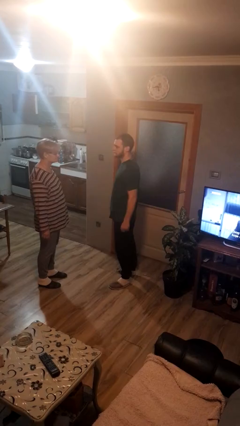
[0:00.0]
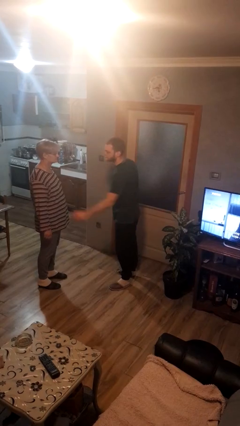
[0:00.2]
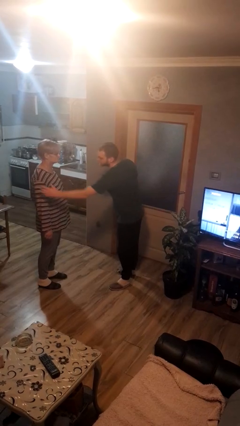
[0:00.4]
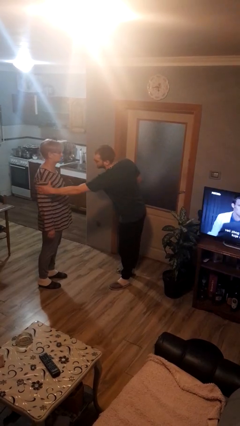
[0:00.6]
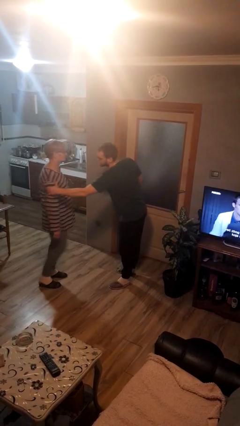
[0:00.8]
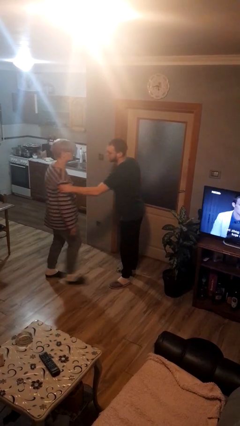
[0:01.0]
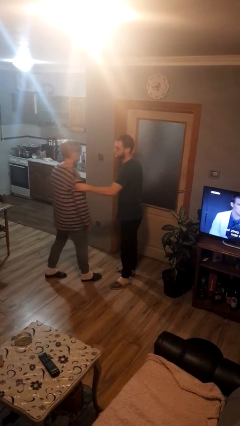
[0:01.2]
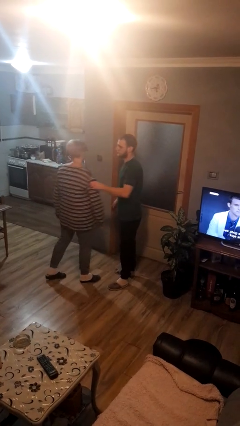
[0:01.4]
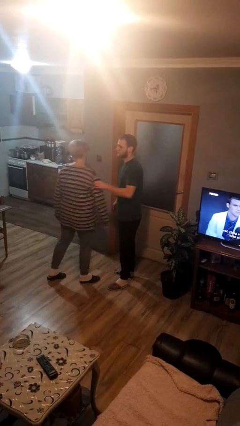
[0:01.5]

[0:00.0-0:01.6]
person grabs person by bicep

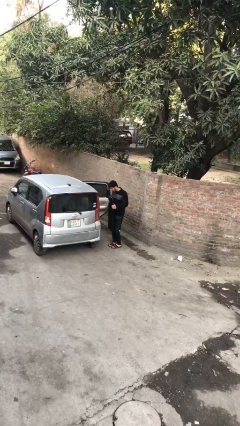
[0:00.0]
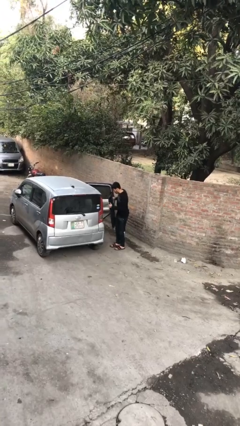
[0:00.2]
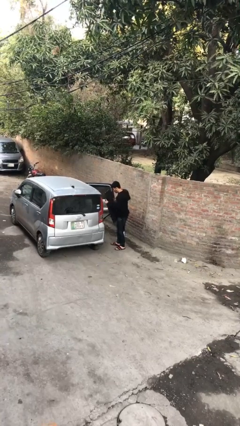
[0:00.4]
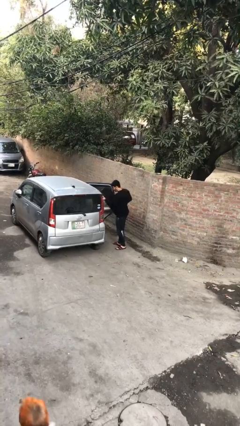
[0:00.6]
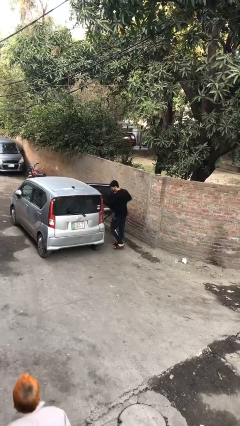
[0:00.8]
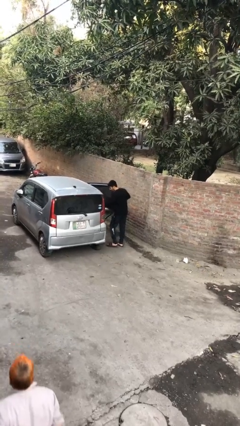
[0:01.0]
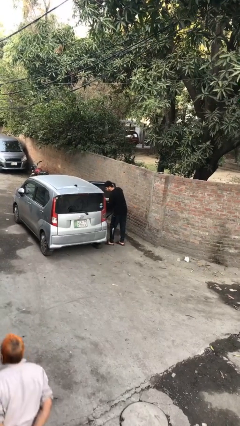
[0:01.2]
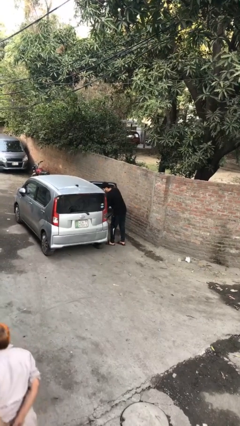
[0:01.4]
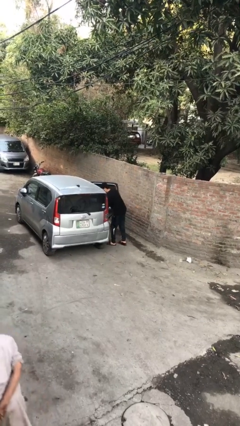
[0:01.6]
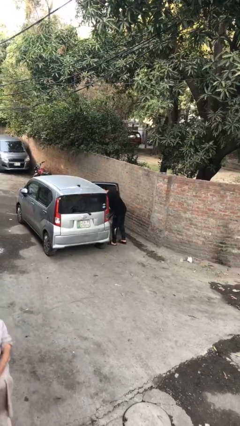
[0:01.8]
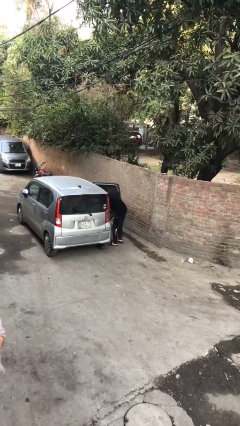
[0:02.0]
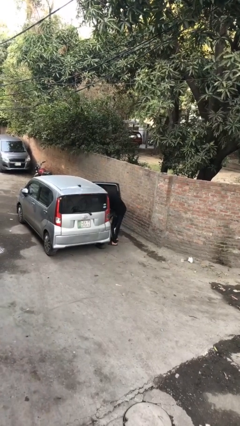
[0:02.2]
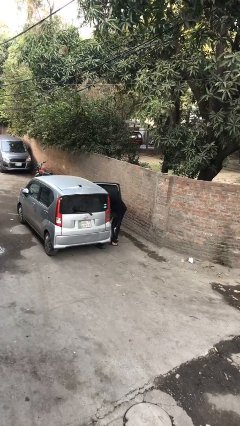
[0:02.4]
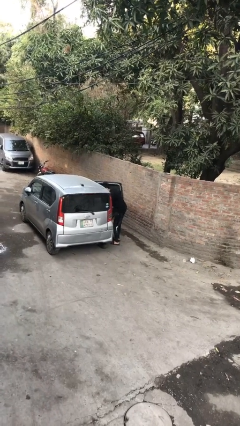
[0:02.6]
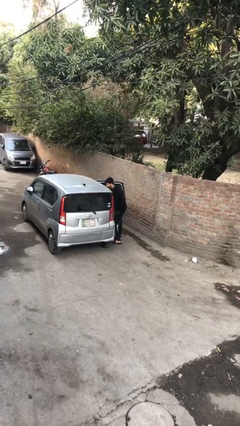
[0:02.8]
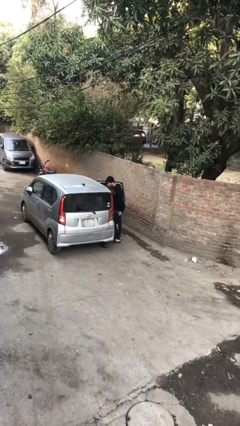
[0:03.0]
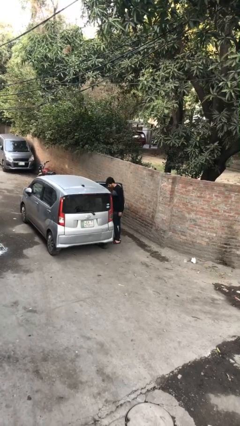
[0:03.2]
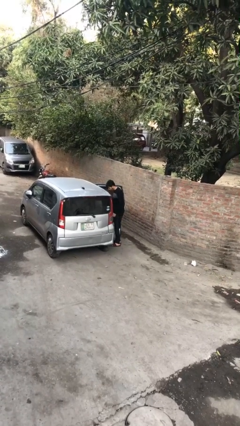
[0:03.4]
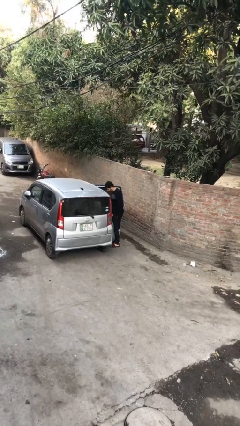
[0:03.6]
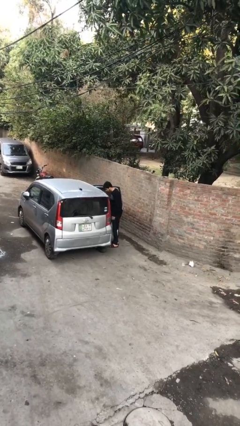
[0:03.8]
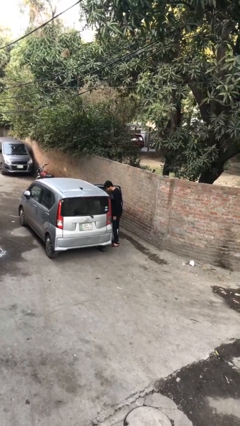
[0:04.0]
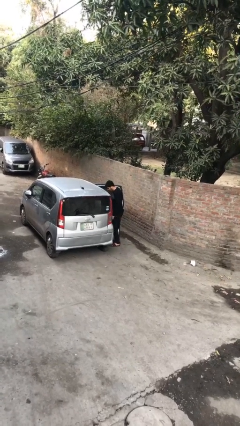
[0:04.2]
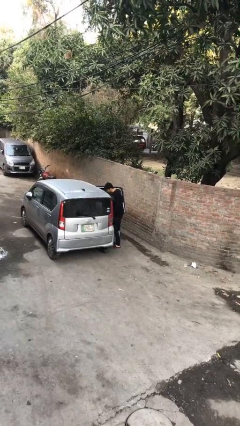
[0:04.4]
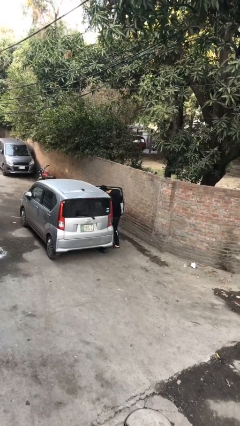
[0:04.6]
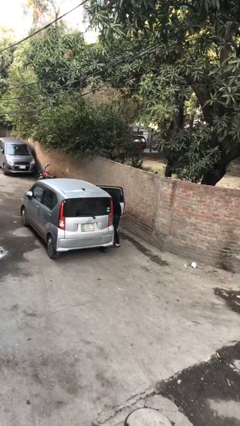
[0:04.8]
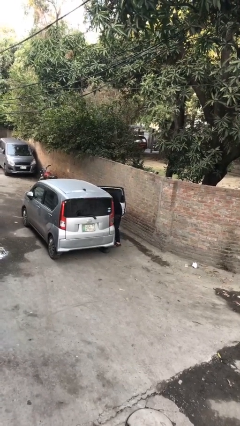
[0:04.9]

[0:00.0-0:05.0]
person loads car

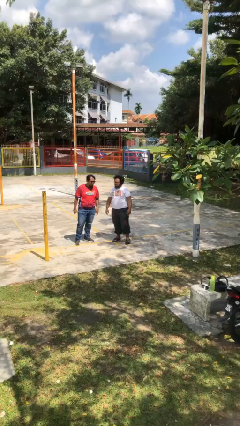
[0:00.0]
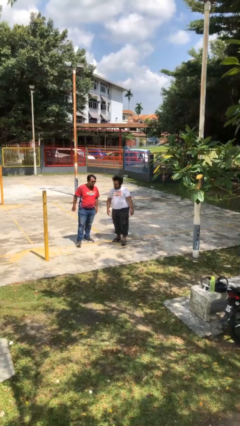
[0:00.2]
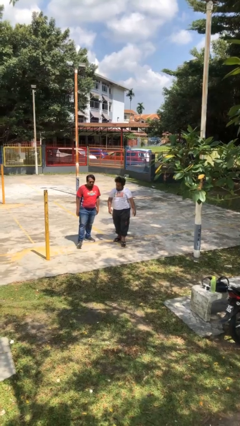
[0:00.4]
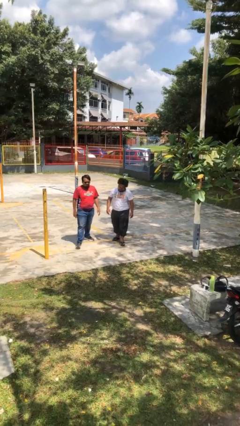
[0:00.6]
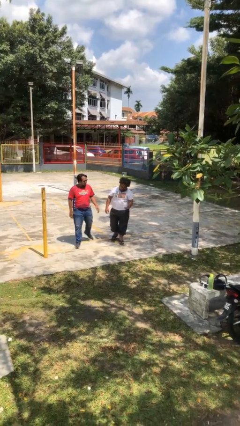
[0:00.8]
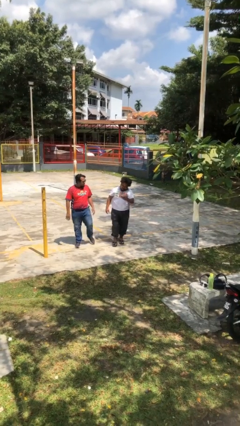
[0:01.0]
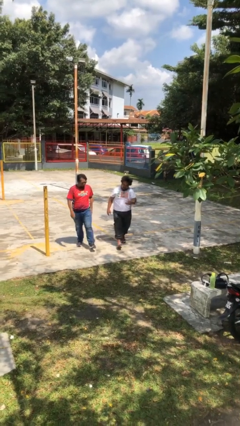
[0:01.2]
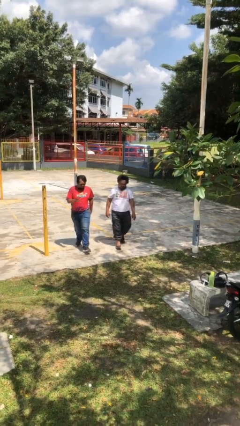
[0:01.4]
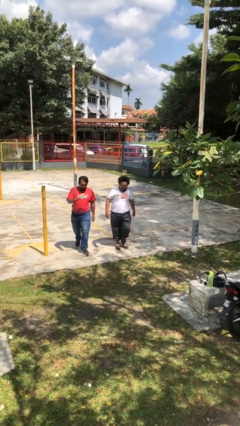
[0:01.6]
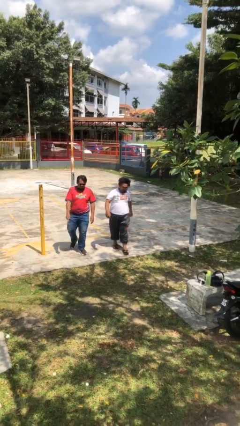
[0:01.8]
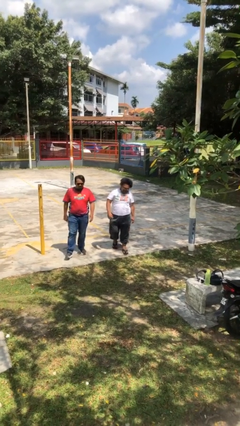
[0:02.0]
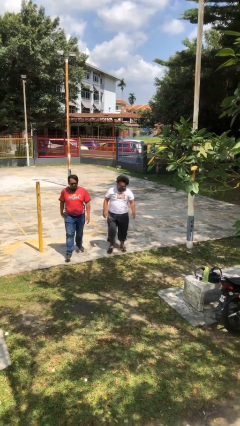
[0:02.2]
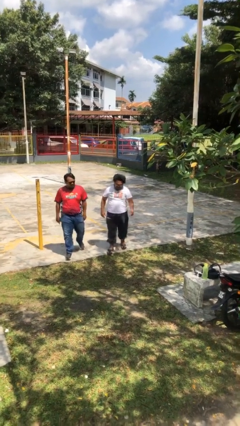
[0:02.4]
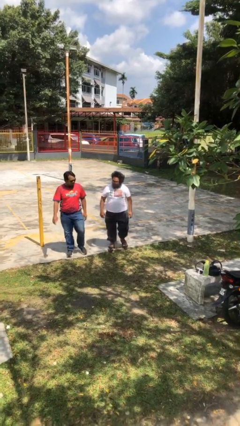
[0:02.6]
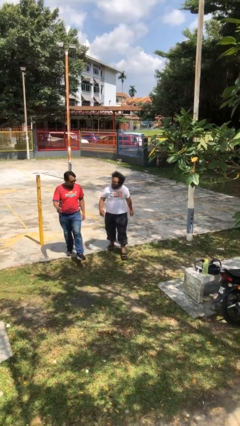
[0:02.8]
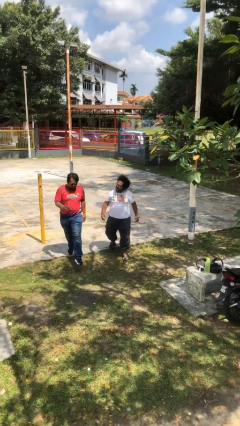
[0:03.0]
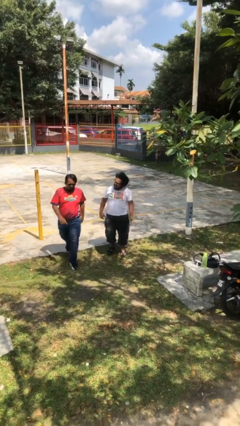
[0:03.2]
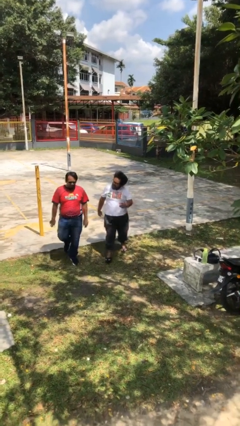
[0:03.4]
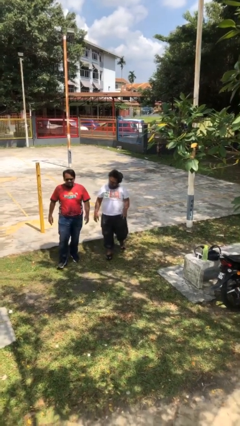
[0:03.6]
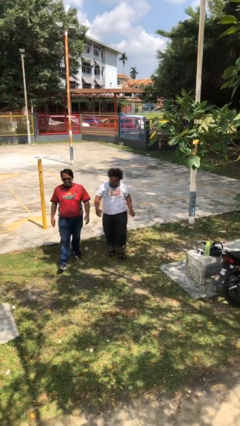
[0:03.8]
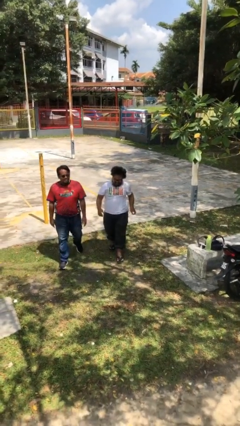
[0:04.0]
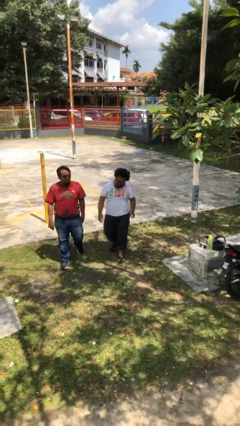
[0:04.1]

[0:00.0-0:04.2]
person talks to person

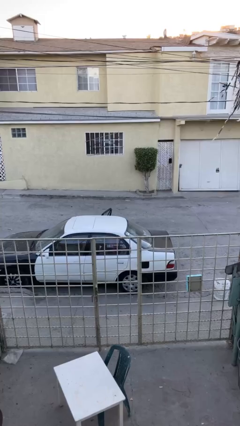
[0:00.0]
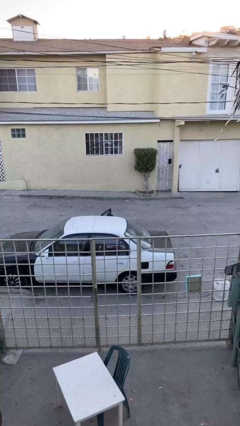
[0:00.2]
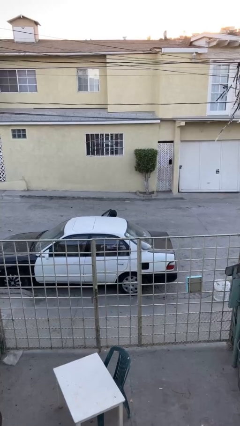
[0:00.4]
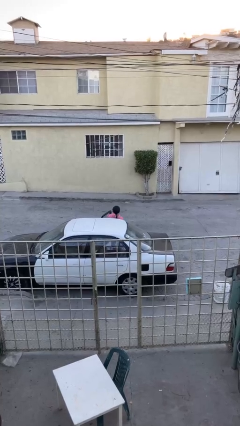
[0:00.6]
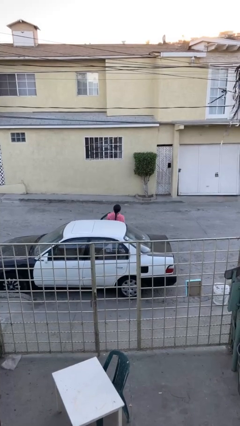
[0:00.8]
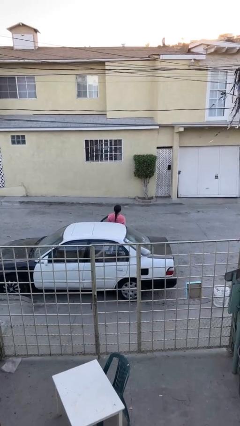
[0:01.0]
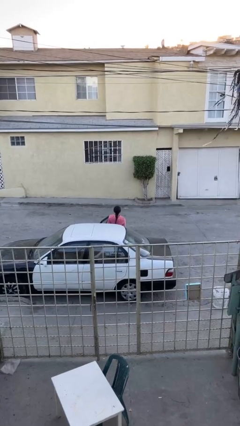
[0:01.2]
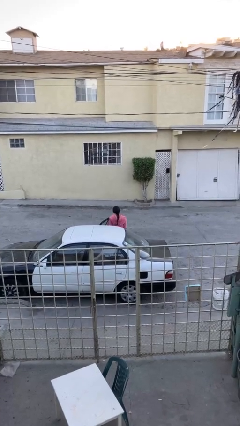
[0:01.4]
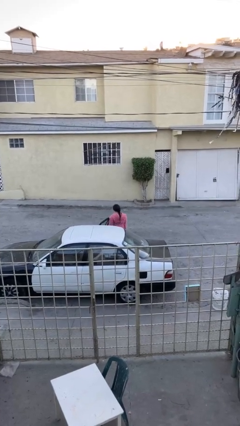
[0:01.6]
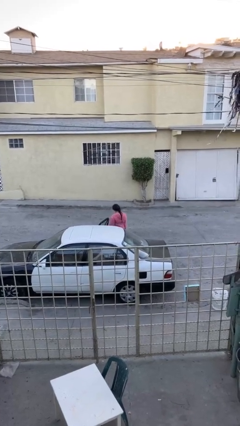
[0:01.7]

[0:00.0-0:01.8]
person exits car

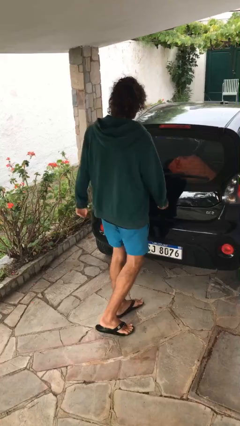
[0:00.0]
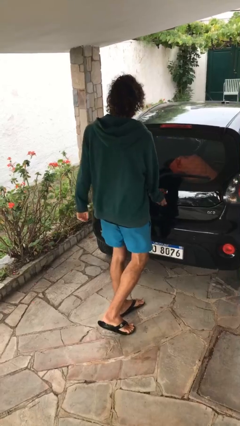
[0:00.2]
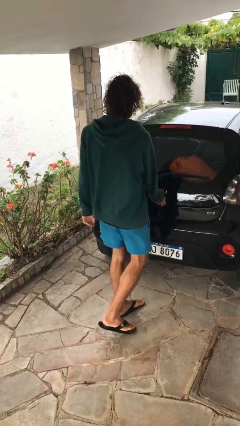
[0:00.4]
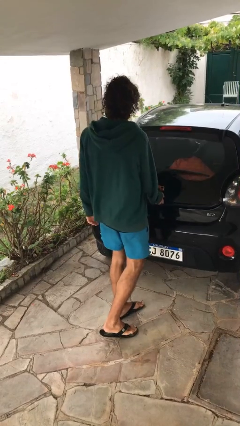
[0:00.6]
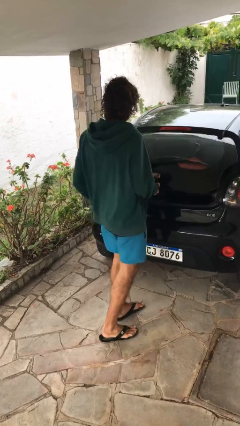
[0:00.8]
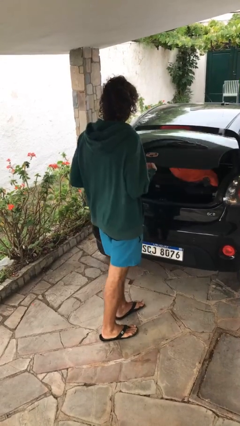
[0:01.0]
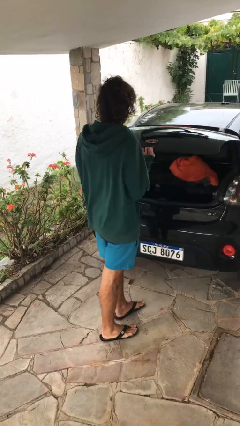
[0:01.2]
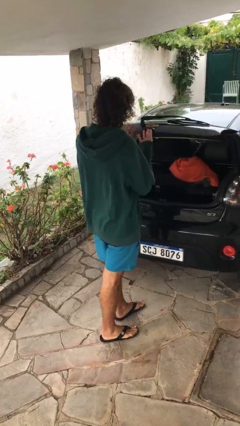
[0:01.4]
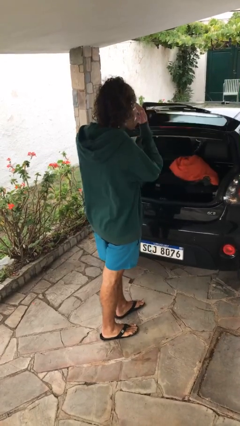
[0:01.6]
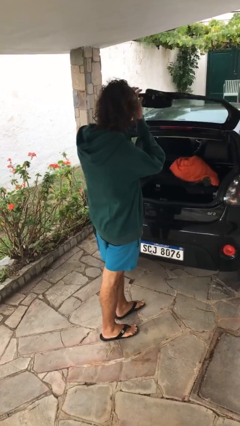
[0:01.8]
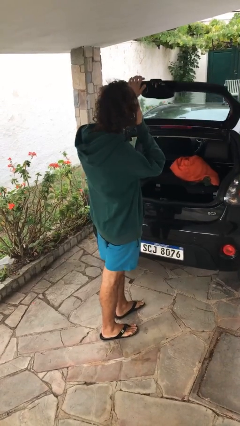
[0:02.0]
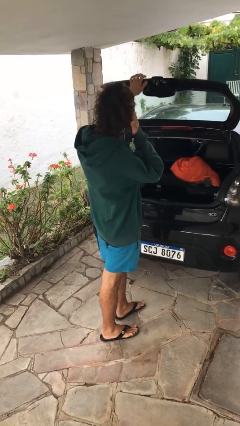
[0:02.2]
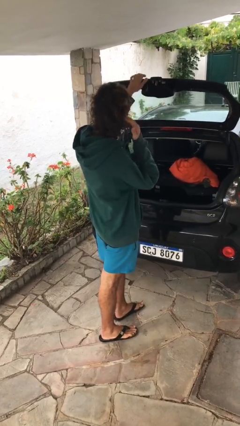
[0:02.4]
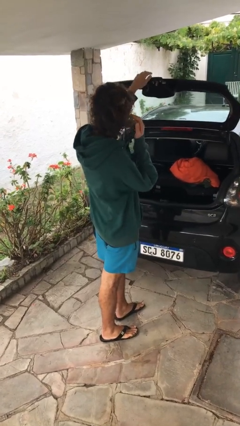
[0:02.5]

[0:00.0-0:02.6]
person opens car trunk

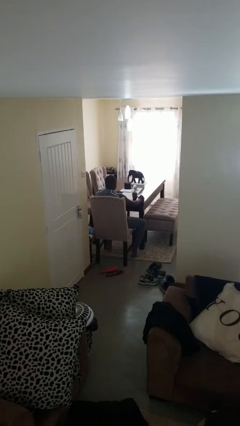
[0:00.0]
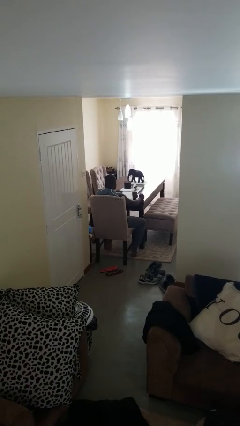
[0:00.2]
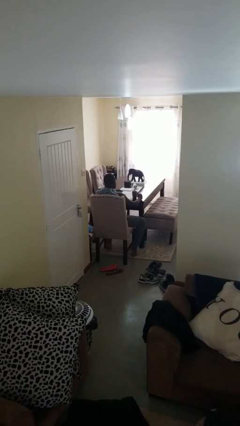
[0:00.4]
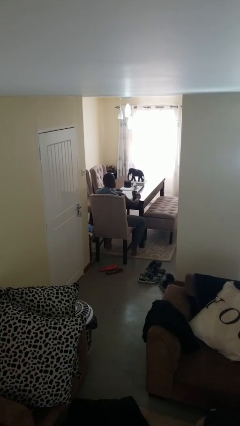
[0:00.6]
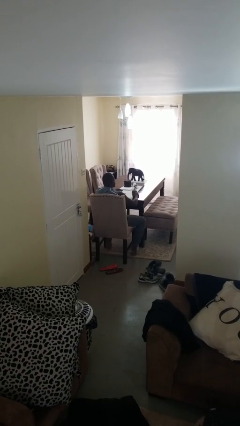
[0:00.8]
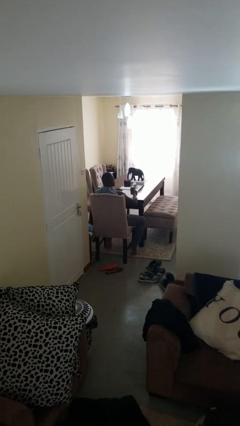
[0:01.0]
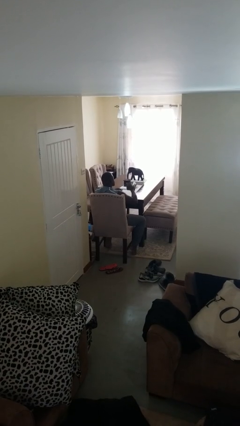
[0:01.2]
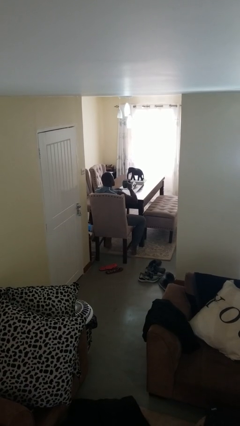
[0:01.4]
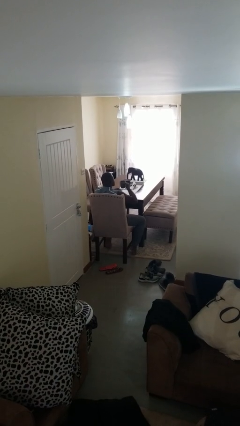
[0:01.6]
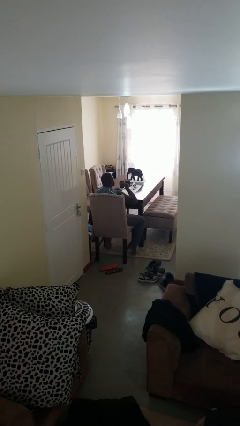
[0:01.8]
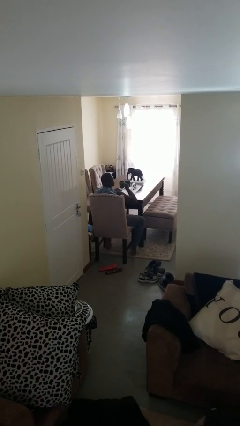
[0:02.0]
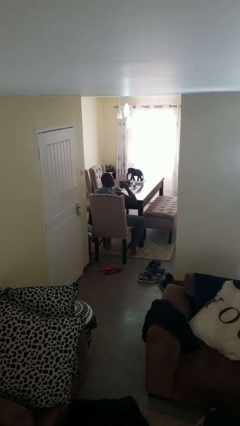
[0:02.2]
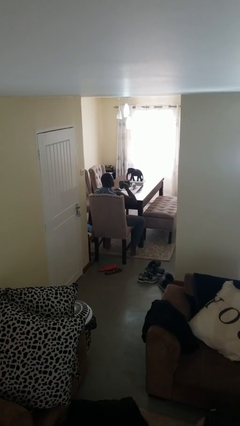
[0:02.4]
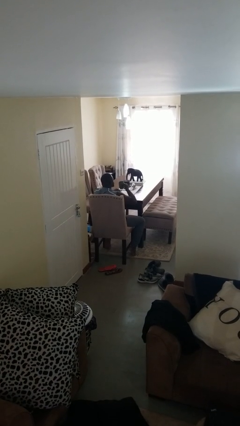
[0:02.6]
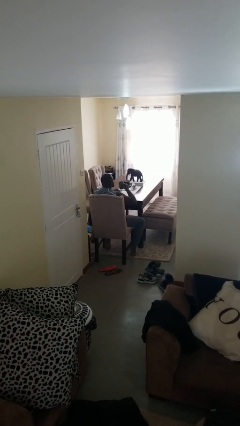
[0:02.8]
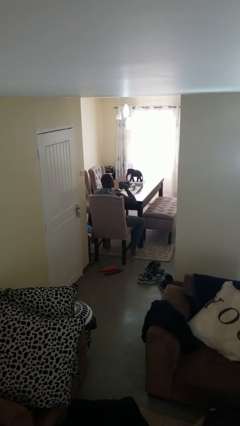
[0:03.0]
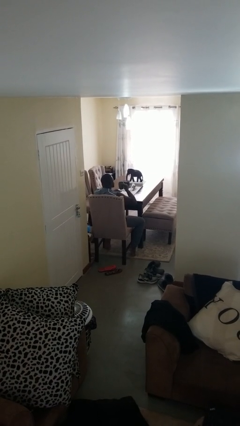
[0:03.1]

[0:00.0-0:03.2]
person picks up object from table
